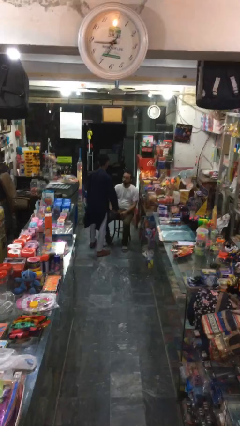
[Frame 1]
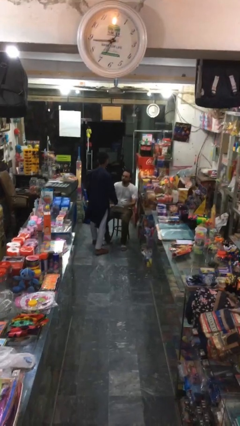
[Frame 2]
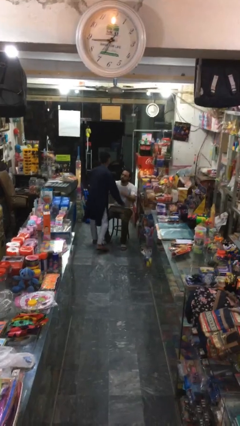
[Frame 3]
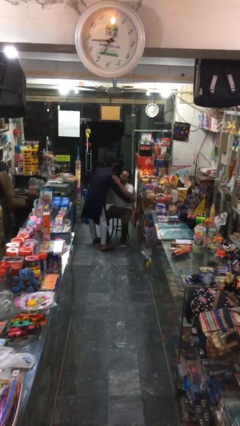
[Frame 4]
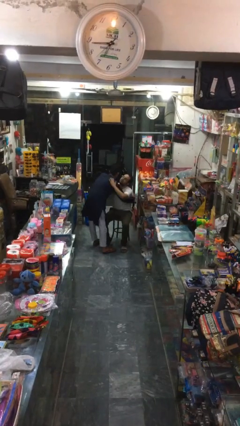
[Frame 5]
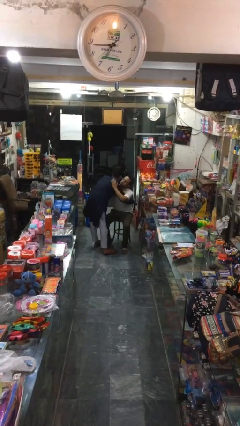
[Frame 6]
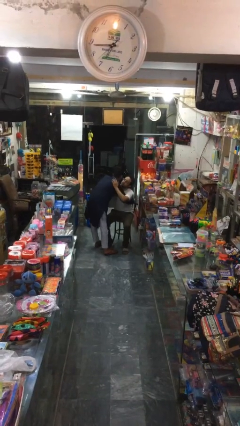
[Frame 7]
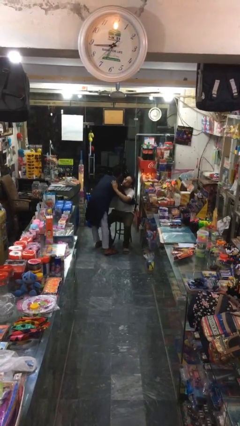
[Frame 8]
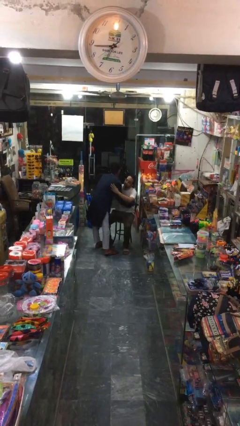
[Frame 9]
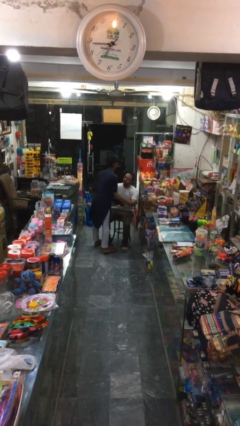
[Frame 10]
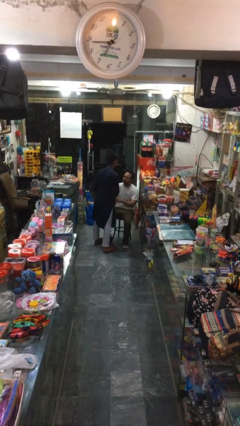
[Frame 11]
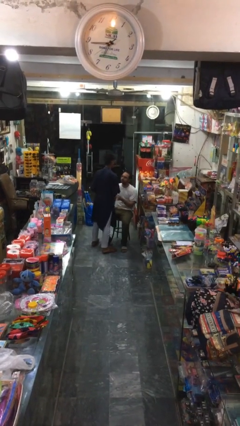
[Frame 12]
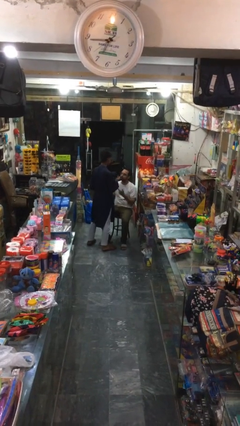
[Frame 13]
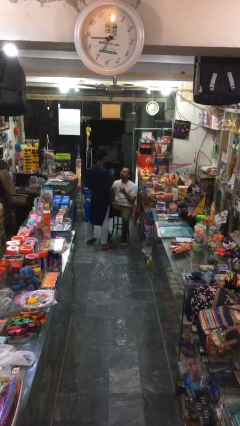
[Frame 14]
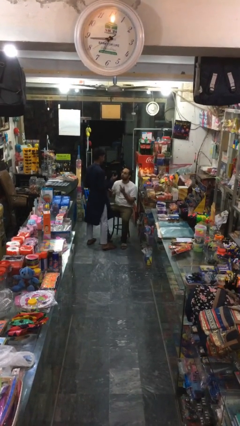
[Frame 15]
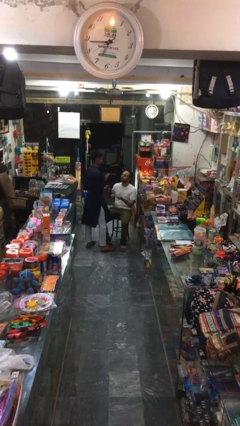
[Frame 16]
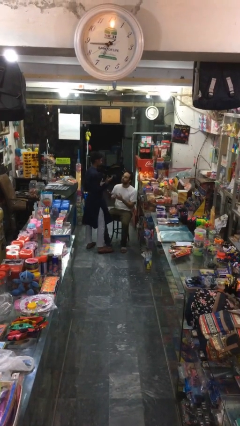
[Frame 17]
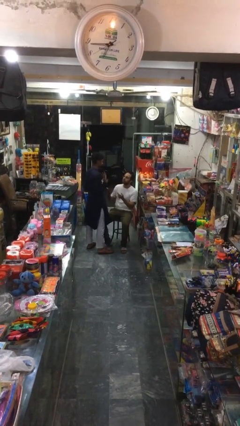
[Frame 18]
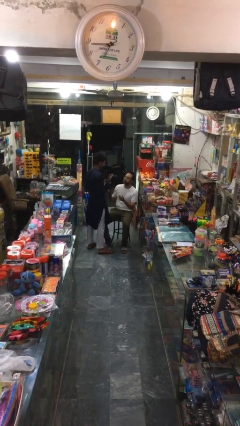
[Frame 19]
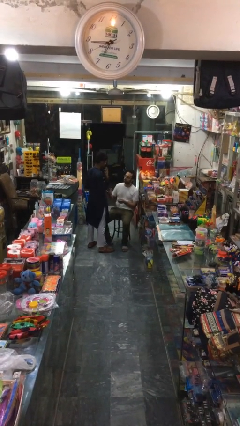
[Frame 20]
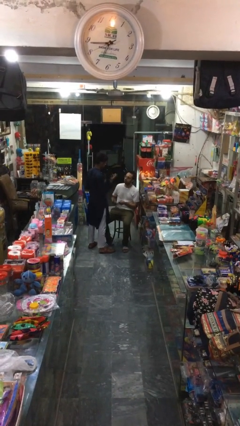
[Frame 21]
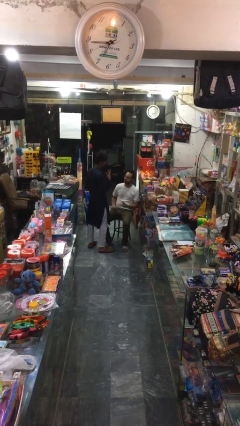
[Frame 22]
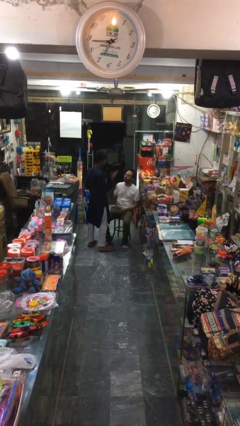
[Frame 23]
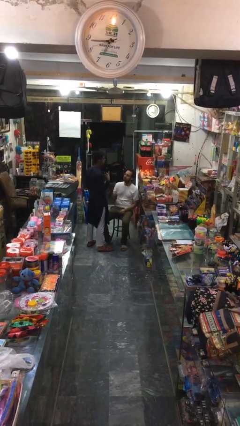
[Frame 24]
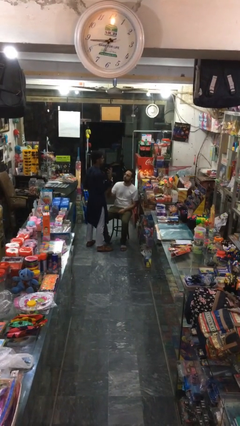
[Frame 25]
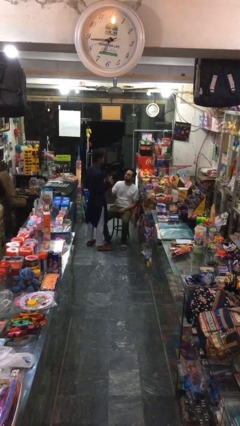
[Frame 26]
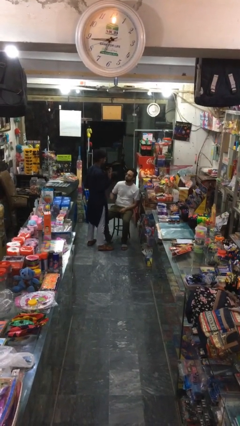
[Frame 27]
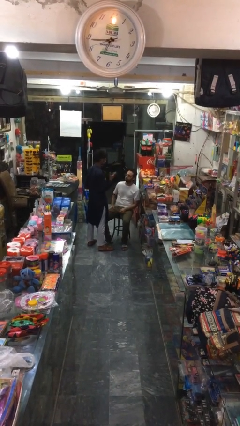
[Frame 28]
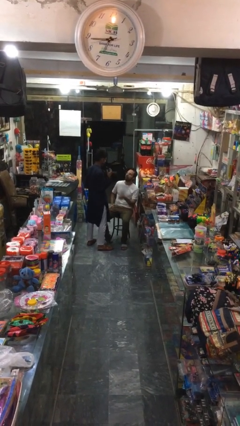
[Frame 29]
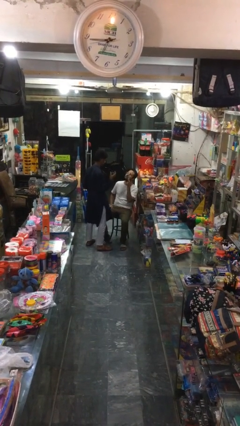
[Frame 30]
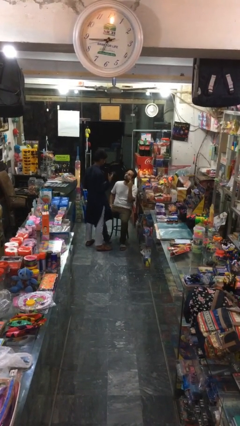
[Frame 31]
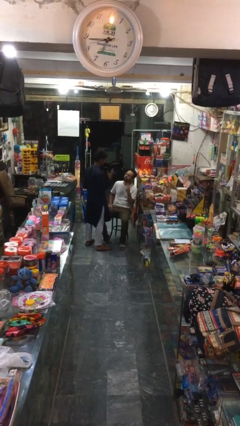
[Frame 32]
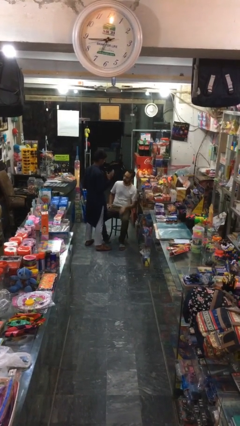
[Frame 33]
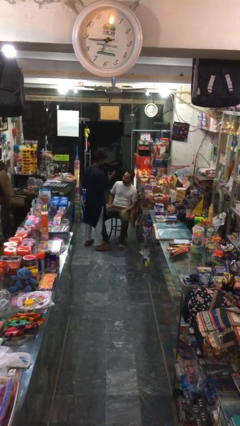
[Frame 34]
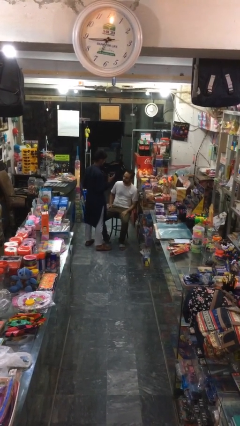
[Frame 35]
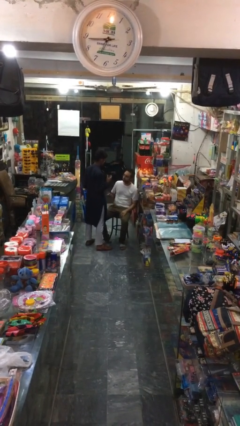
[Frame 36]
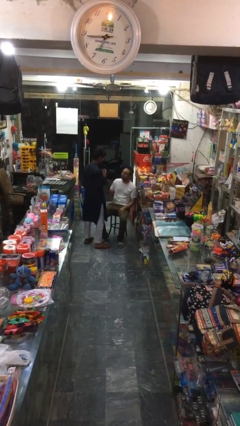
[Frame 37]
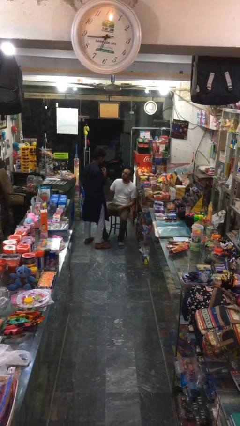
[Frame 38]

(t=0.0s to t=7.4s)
person embraces person

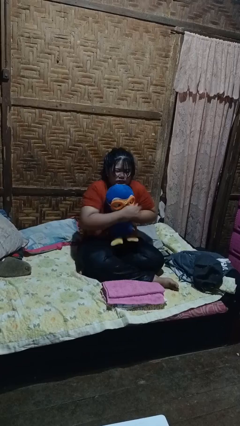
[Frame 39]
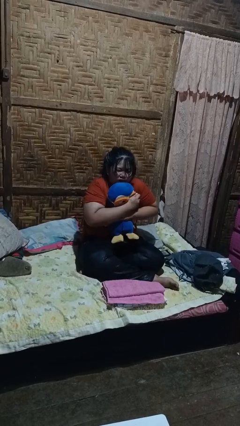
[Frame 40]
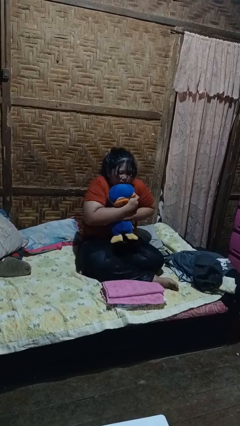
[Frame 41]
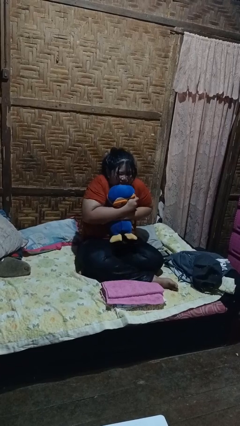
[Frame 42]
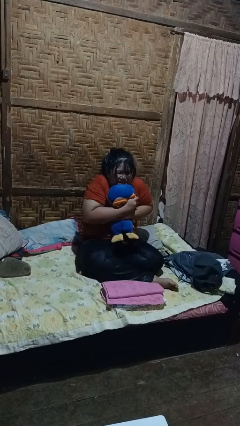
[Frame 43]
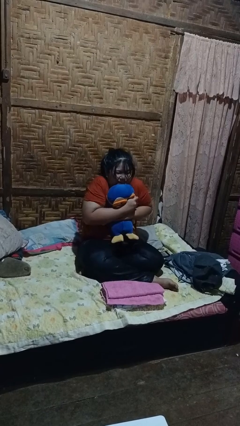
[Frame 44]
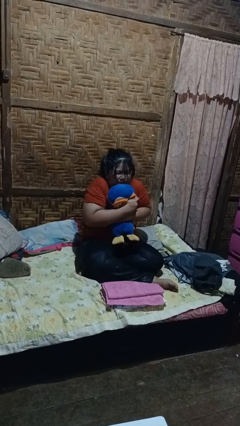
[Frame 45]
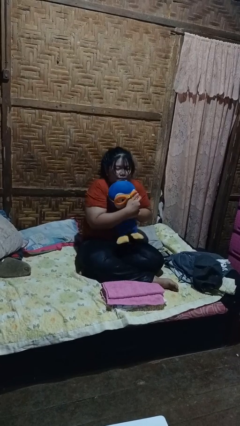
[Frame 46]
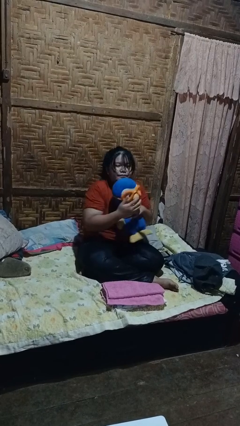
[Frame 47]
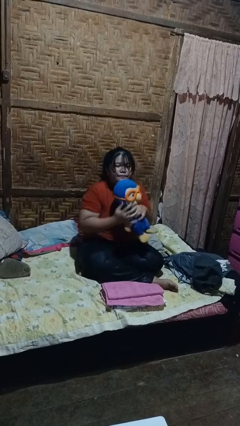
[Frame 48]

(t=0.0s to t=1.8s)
person hugs stuffed animal

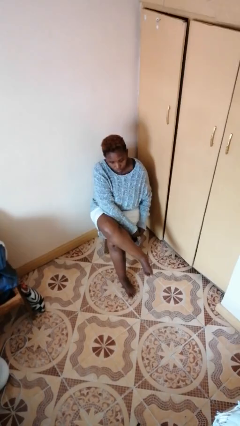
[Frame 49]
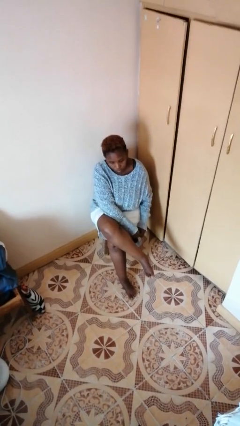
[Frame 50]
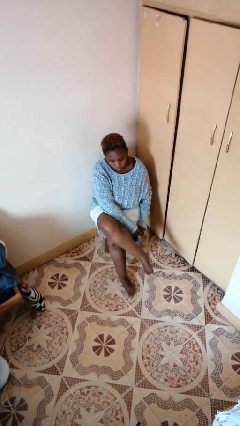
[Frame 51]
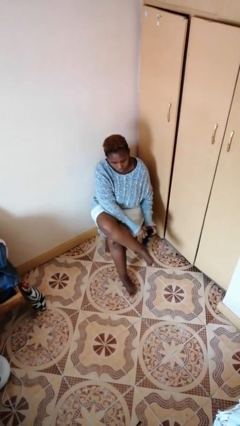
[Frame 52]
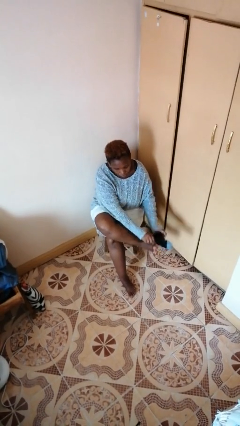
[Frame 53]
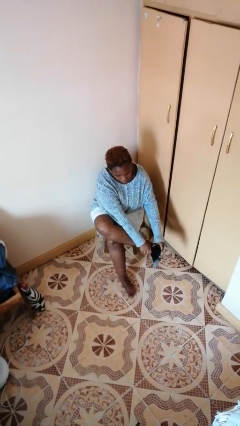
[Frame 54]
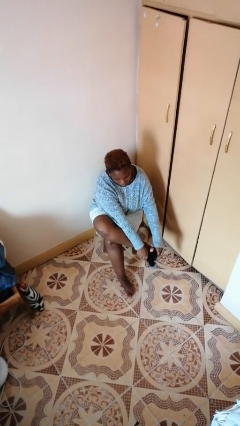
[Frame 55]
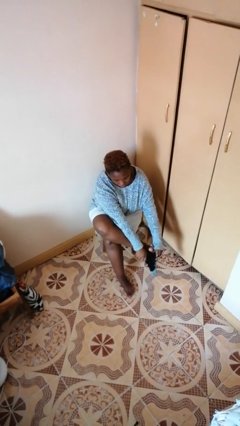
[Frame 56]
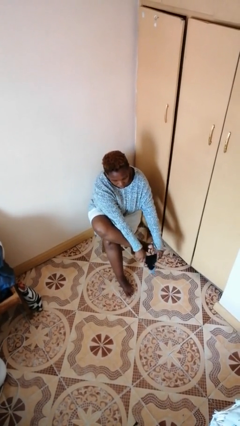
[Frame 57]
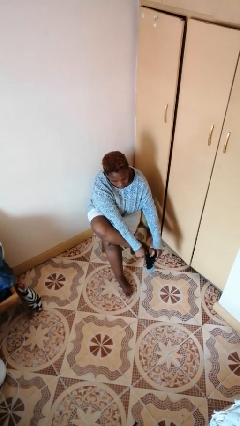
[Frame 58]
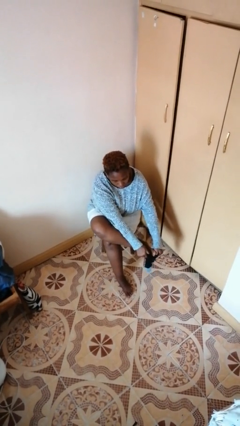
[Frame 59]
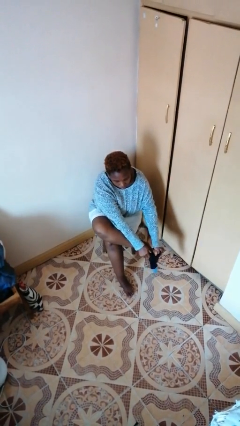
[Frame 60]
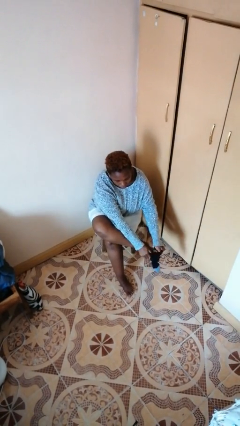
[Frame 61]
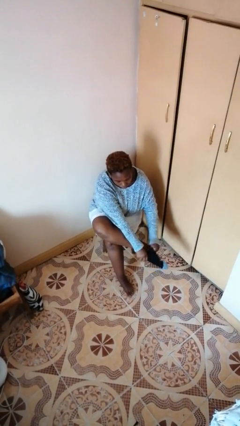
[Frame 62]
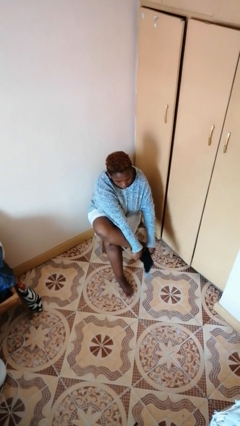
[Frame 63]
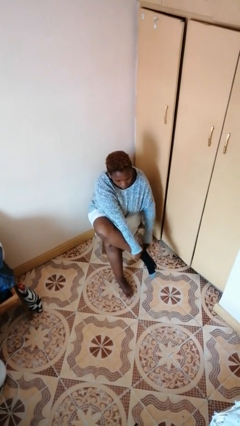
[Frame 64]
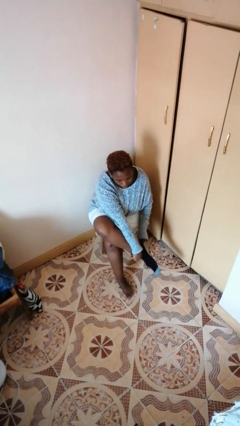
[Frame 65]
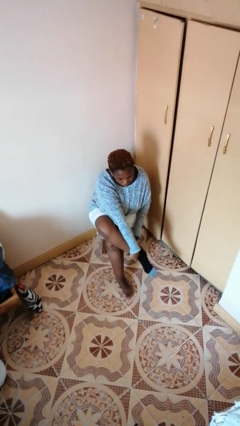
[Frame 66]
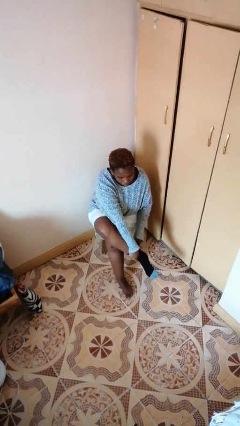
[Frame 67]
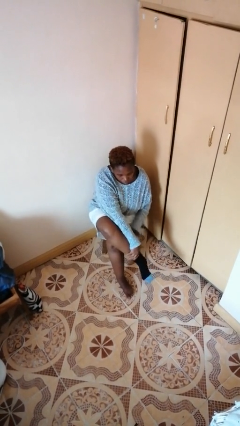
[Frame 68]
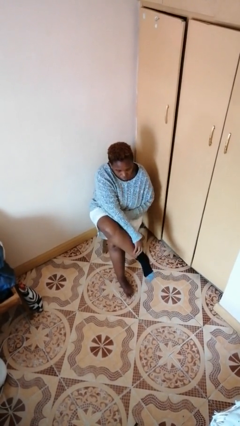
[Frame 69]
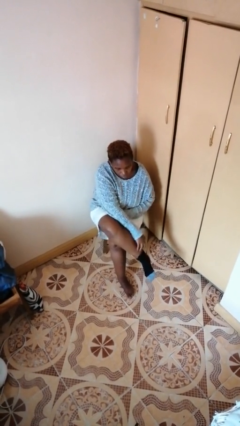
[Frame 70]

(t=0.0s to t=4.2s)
person puts on socks

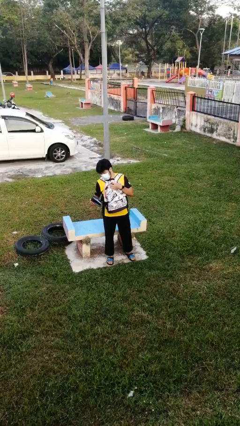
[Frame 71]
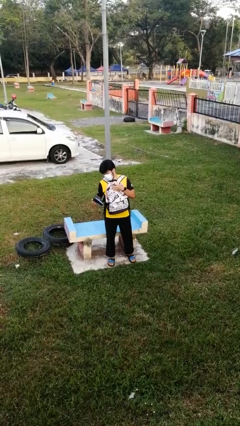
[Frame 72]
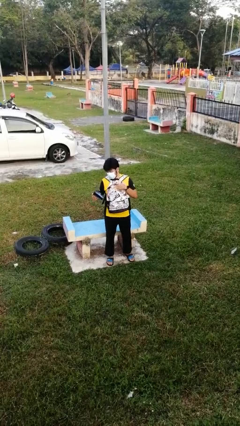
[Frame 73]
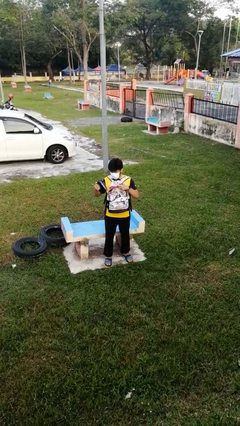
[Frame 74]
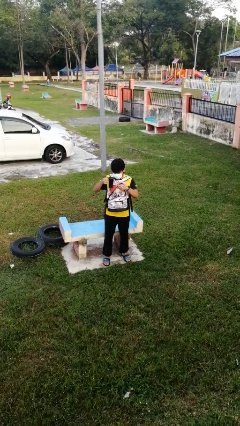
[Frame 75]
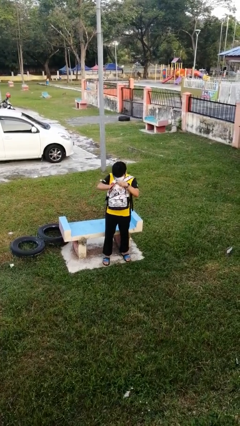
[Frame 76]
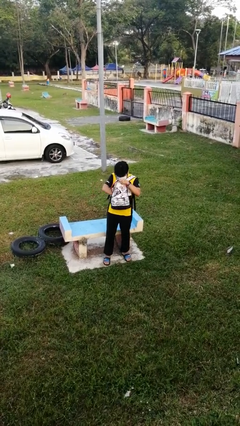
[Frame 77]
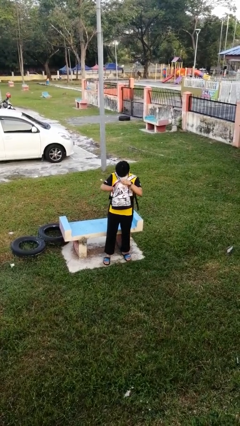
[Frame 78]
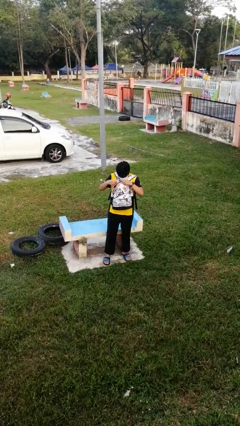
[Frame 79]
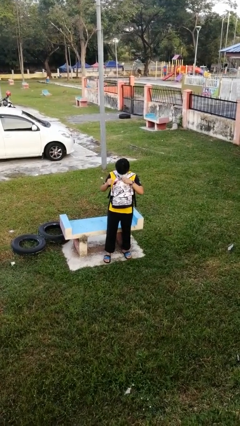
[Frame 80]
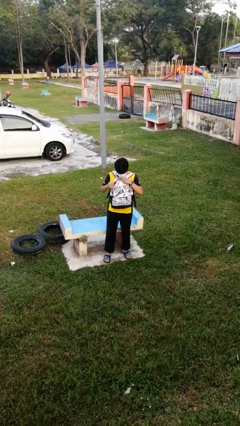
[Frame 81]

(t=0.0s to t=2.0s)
person puts object into backpack

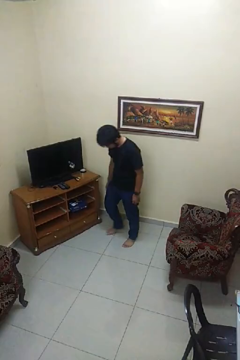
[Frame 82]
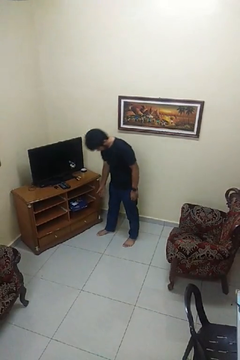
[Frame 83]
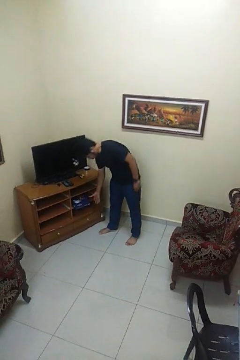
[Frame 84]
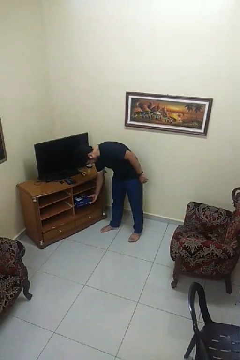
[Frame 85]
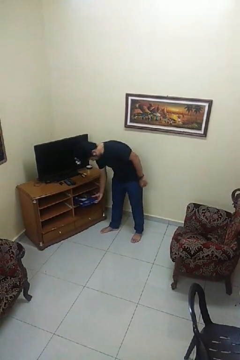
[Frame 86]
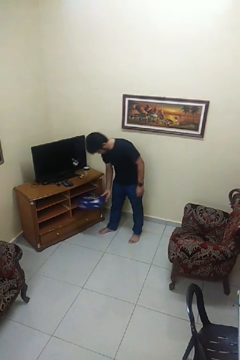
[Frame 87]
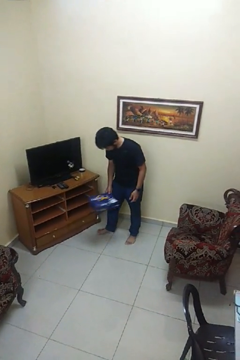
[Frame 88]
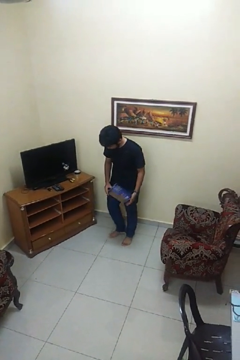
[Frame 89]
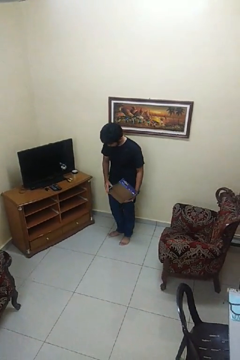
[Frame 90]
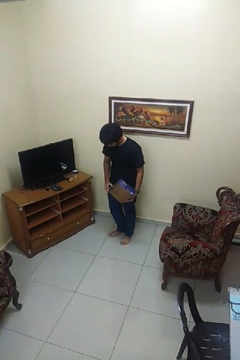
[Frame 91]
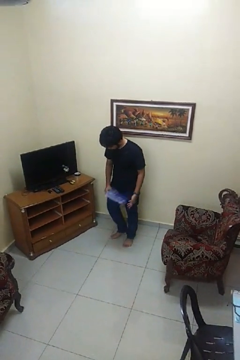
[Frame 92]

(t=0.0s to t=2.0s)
person picks up object from cabinet

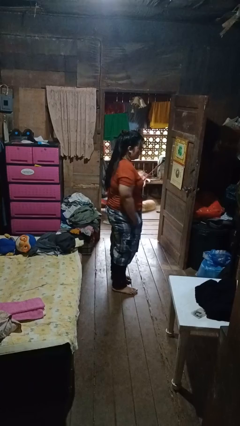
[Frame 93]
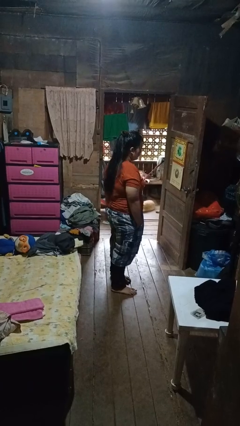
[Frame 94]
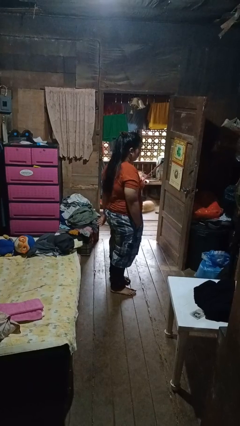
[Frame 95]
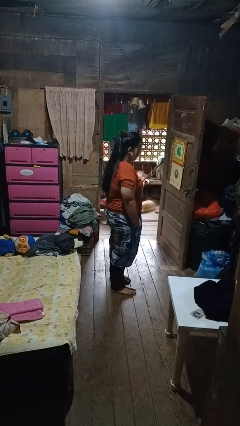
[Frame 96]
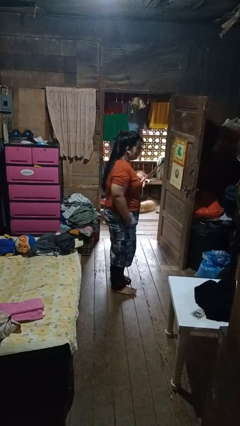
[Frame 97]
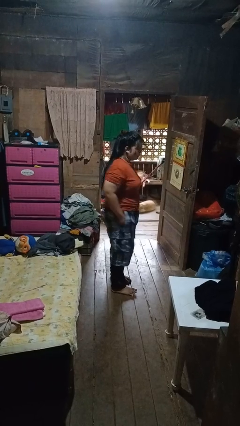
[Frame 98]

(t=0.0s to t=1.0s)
person puts hands in back pockets
